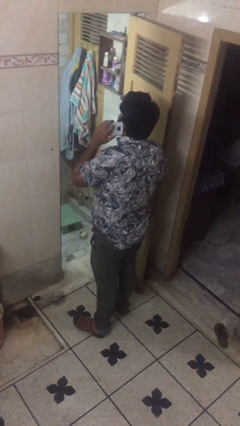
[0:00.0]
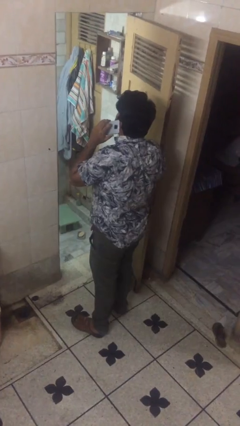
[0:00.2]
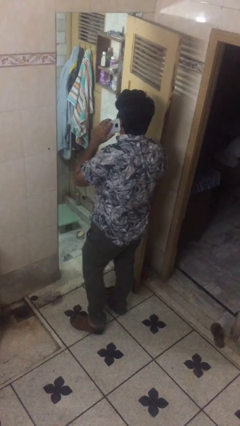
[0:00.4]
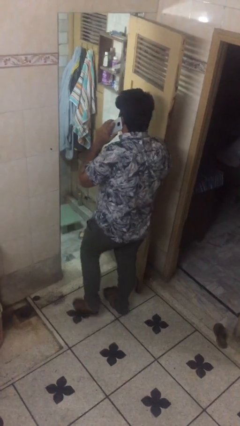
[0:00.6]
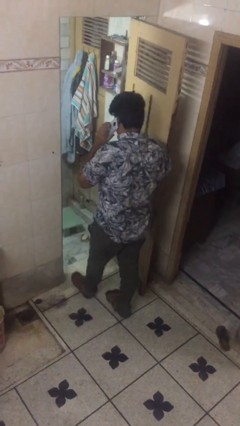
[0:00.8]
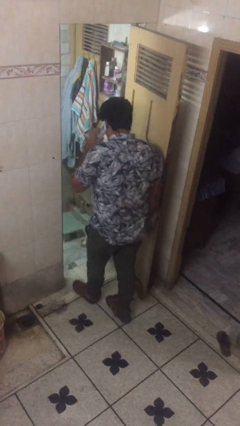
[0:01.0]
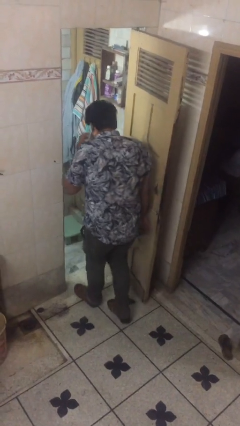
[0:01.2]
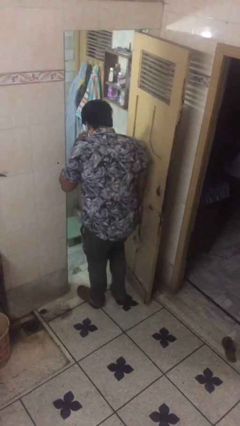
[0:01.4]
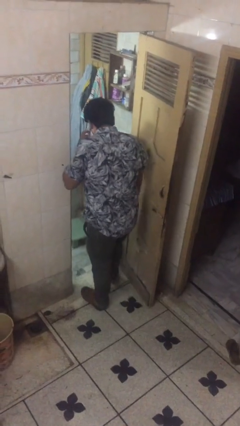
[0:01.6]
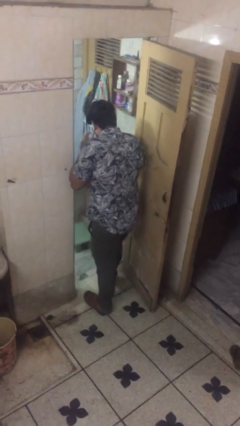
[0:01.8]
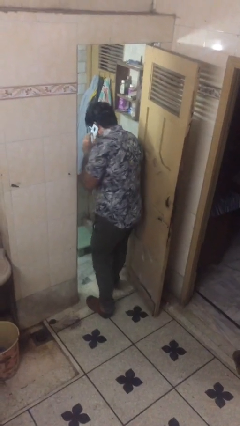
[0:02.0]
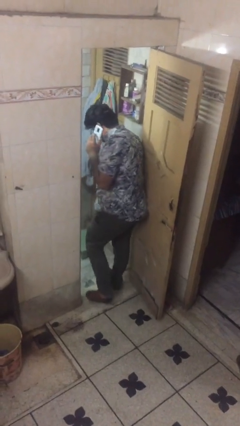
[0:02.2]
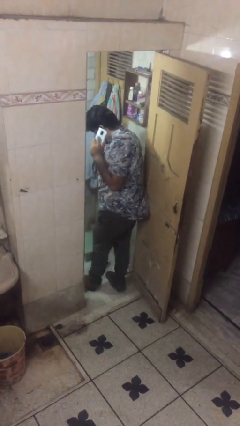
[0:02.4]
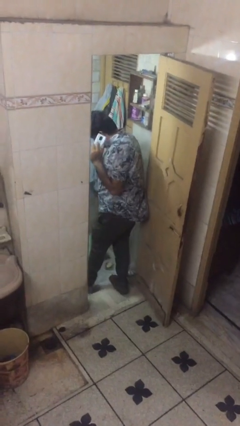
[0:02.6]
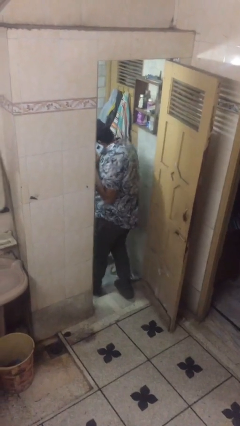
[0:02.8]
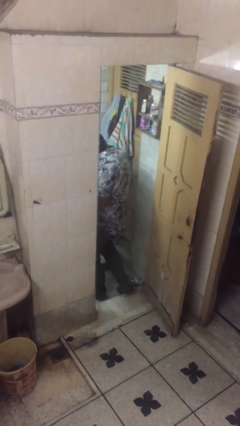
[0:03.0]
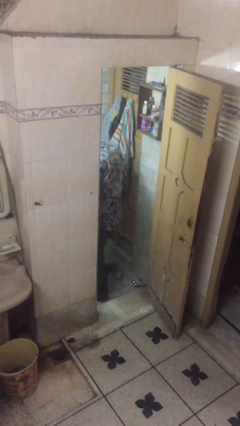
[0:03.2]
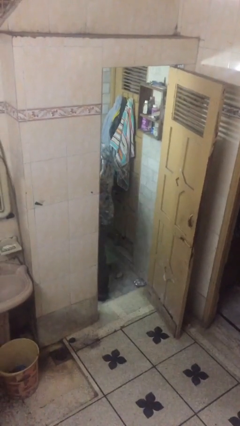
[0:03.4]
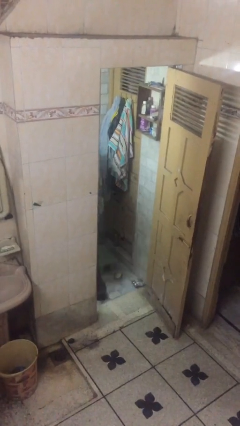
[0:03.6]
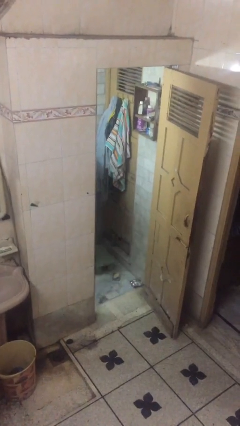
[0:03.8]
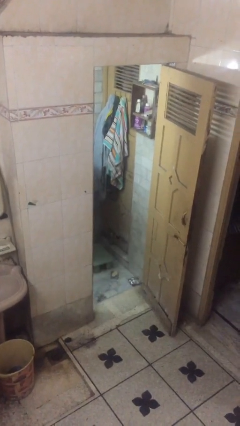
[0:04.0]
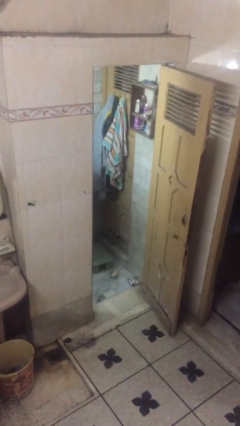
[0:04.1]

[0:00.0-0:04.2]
person exits scene through structure

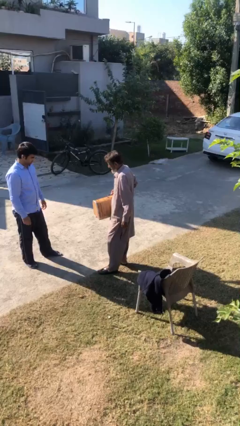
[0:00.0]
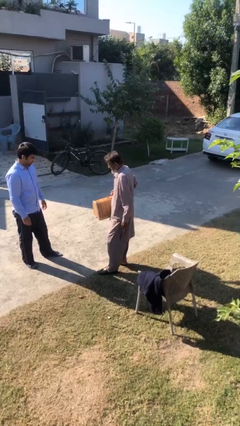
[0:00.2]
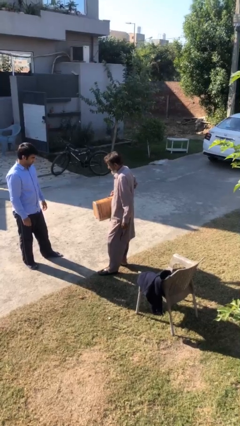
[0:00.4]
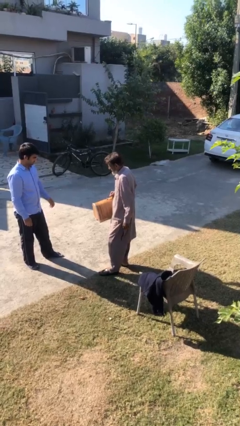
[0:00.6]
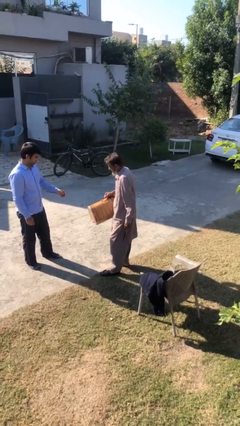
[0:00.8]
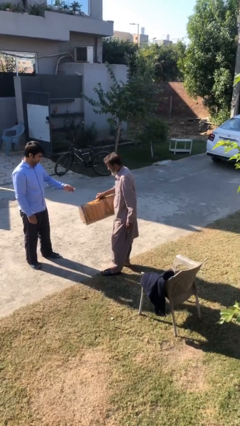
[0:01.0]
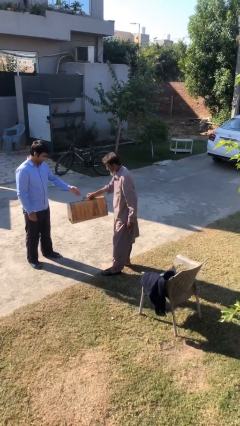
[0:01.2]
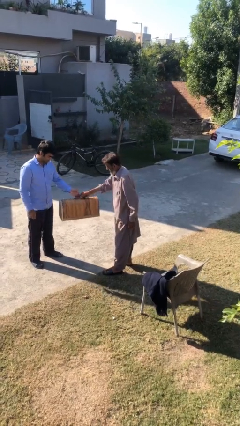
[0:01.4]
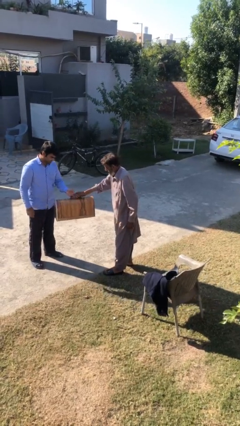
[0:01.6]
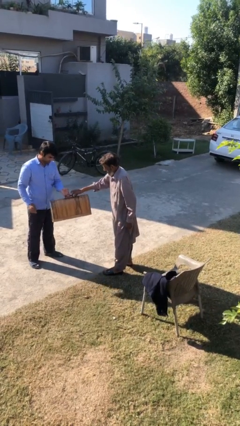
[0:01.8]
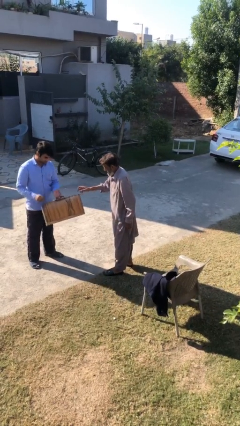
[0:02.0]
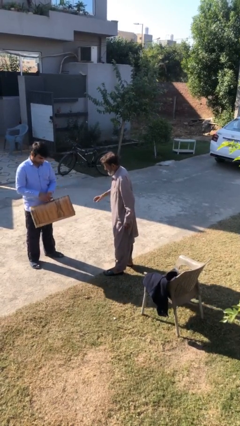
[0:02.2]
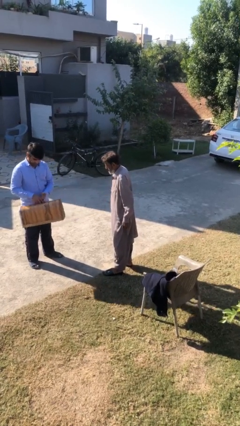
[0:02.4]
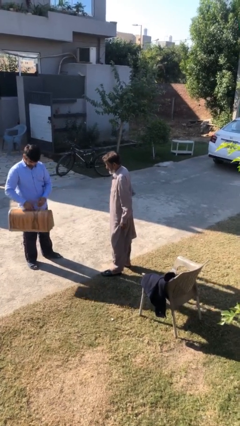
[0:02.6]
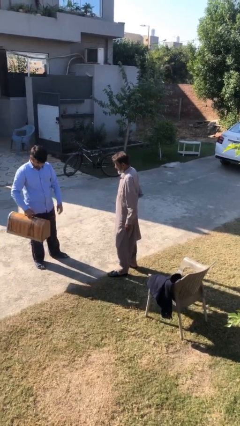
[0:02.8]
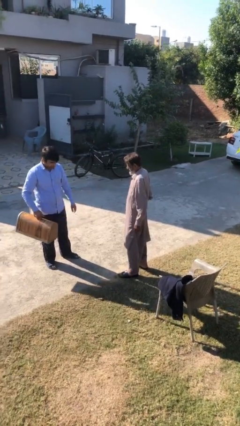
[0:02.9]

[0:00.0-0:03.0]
person transfers object to person

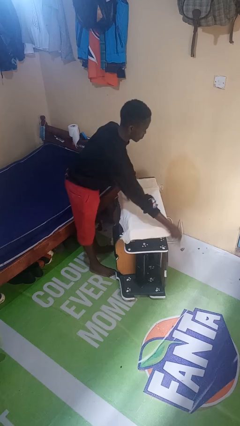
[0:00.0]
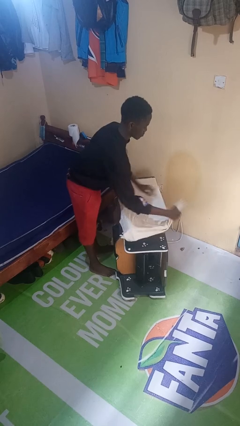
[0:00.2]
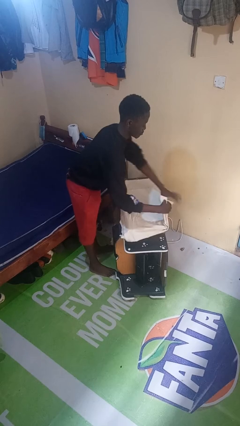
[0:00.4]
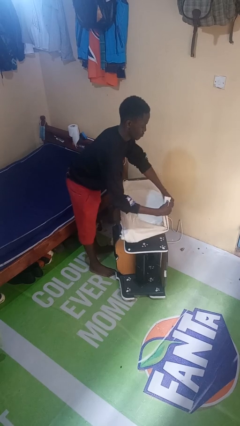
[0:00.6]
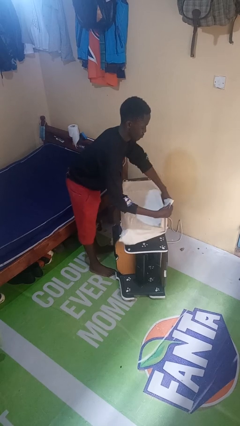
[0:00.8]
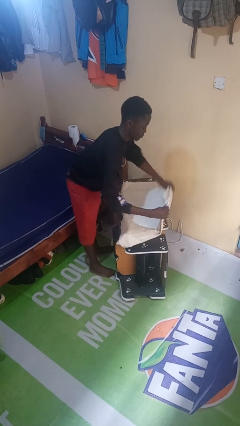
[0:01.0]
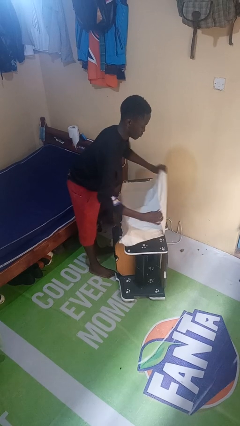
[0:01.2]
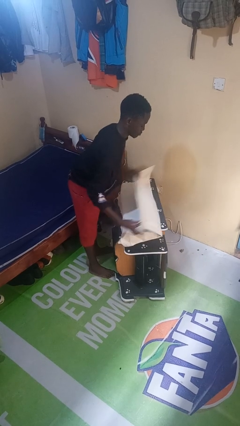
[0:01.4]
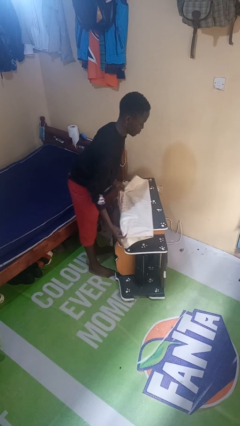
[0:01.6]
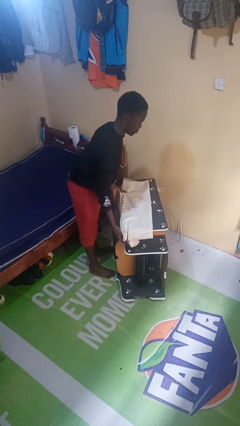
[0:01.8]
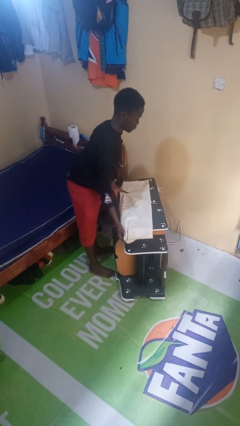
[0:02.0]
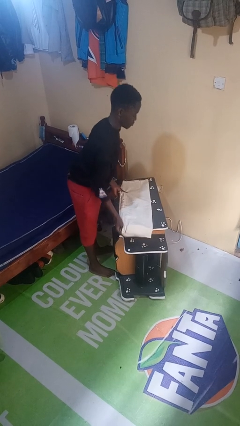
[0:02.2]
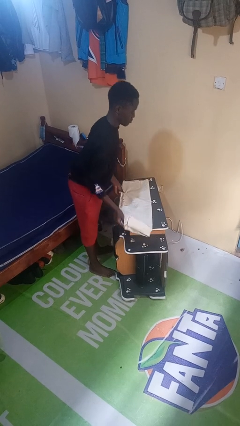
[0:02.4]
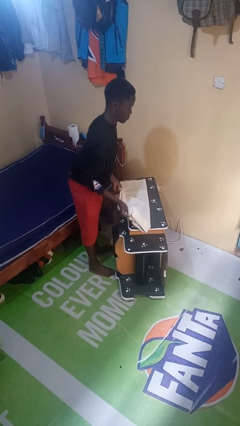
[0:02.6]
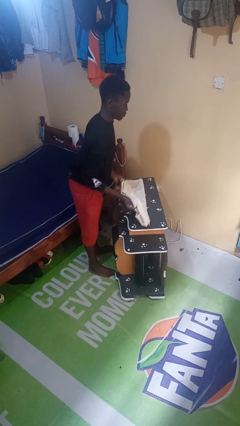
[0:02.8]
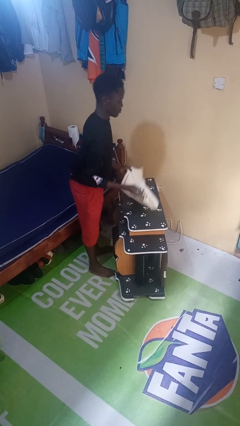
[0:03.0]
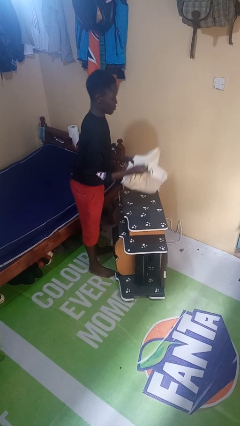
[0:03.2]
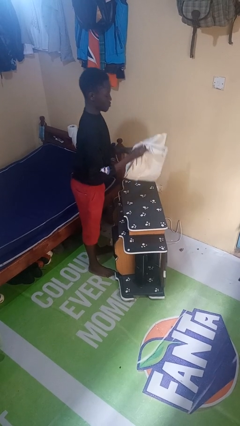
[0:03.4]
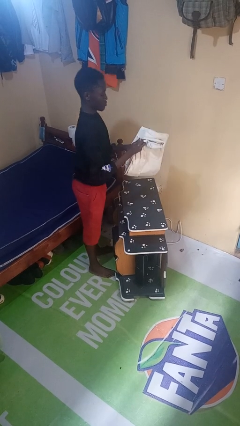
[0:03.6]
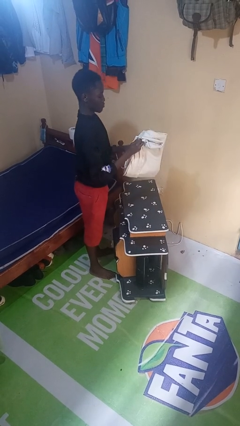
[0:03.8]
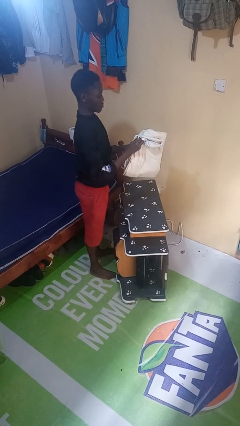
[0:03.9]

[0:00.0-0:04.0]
person folds tablecloth

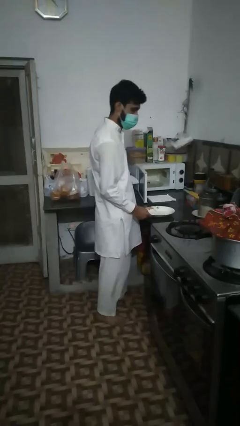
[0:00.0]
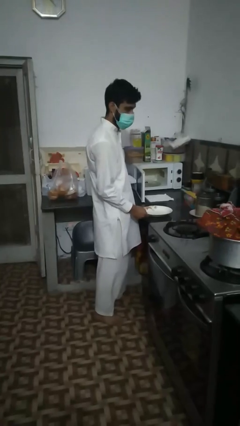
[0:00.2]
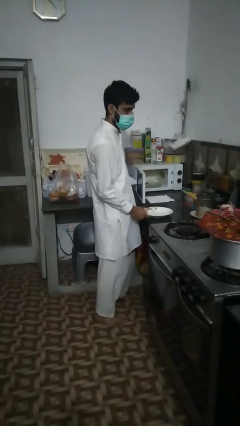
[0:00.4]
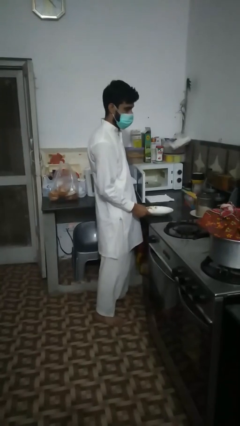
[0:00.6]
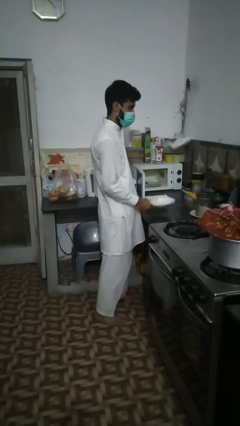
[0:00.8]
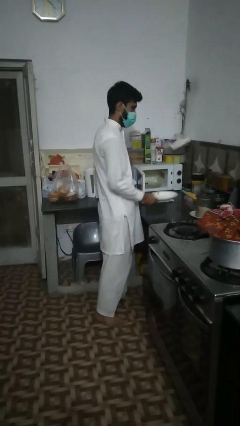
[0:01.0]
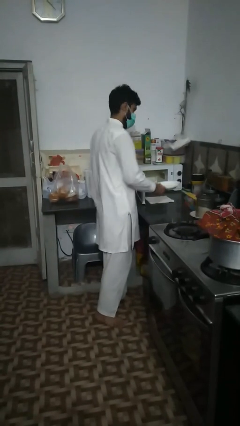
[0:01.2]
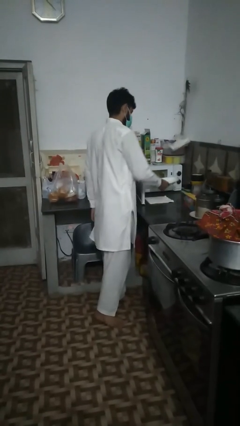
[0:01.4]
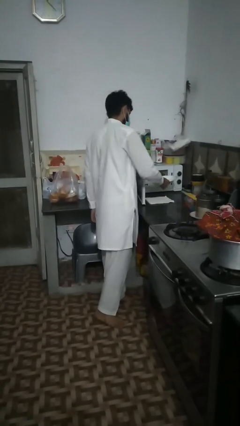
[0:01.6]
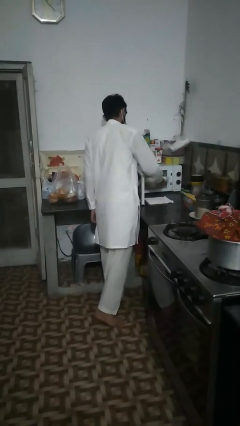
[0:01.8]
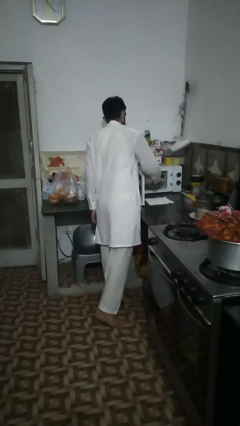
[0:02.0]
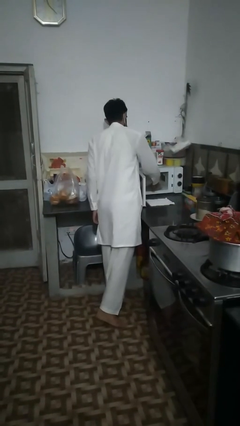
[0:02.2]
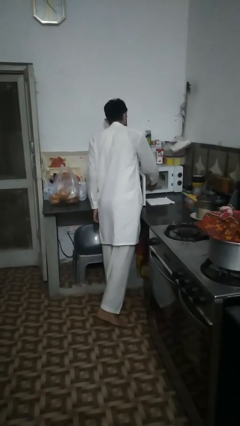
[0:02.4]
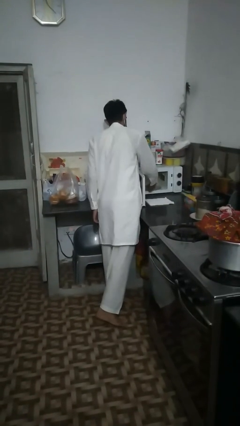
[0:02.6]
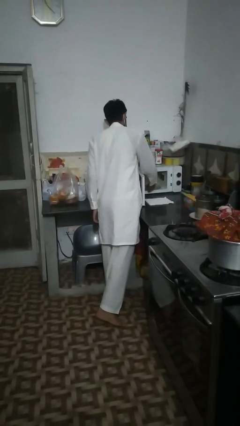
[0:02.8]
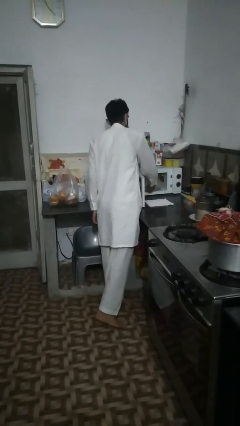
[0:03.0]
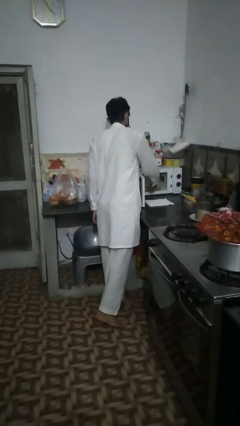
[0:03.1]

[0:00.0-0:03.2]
person puts object into microwave

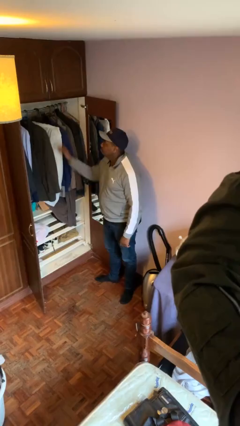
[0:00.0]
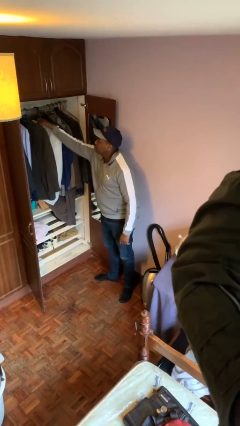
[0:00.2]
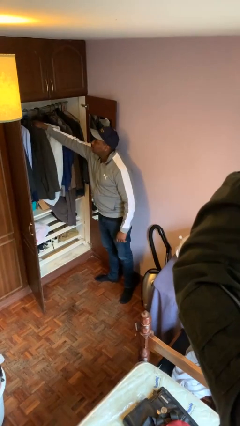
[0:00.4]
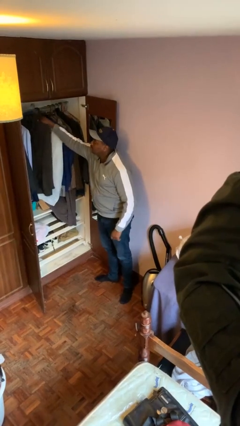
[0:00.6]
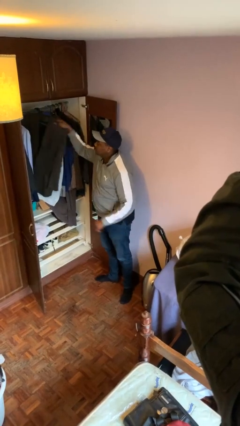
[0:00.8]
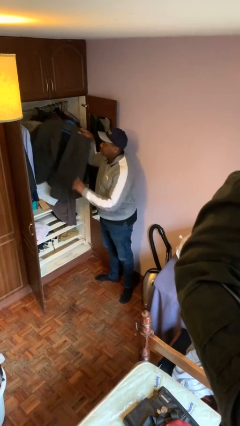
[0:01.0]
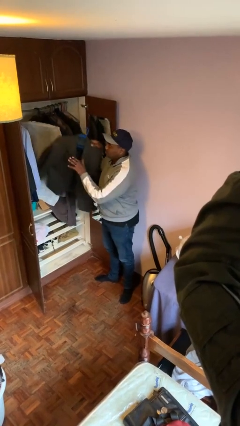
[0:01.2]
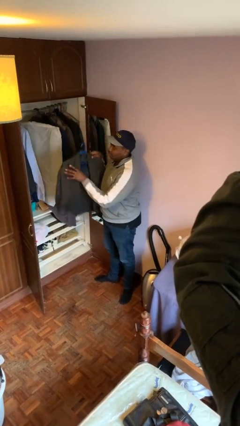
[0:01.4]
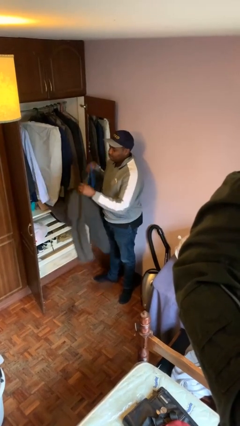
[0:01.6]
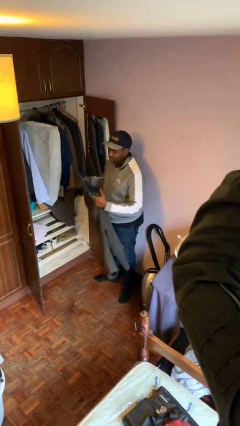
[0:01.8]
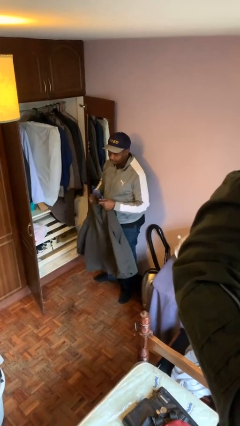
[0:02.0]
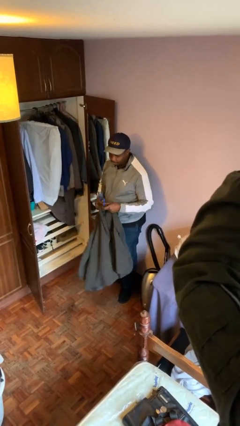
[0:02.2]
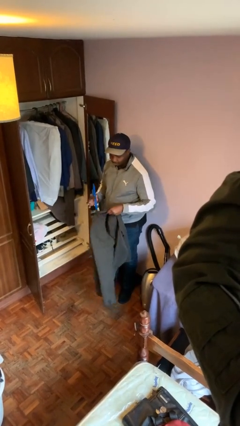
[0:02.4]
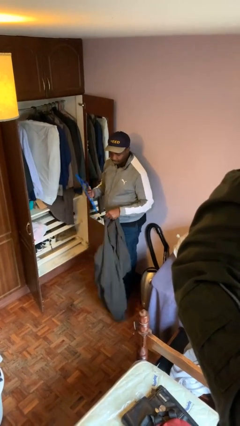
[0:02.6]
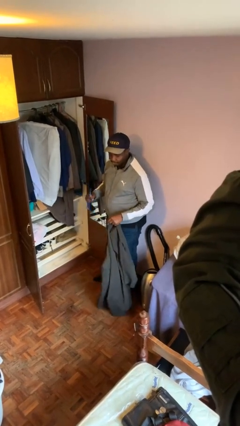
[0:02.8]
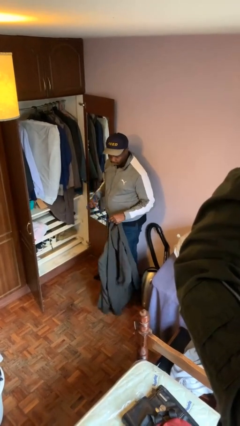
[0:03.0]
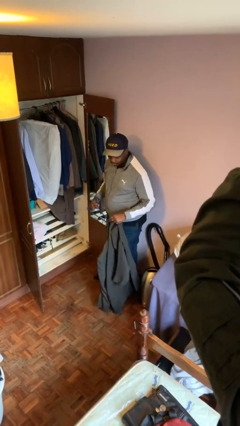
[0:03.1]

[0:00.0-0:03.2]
person takes clothes from closet
